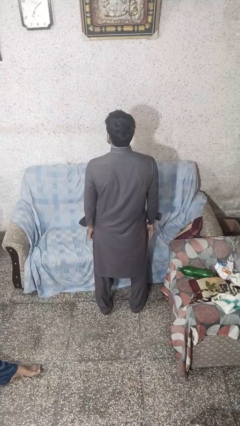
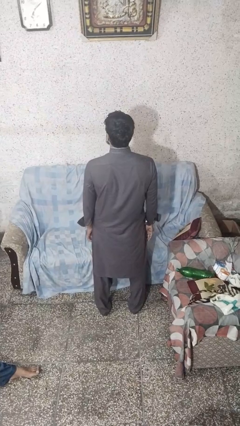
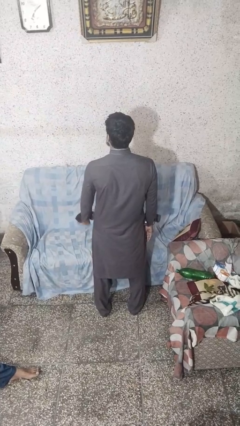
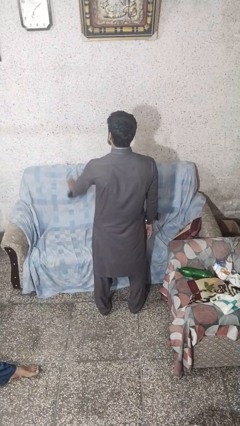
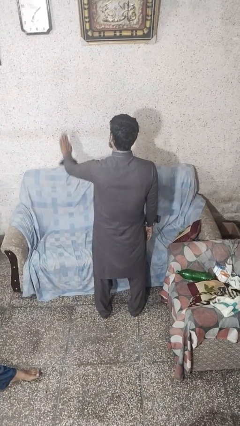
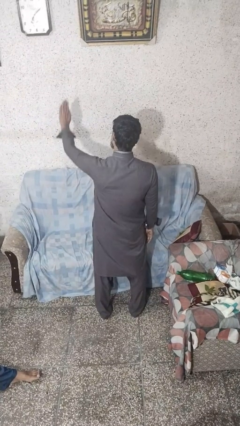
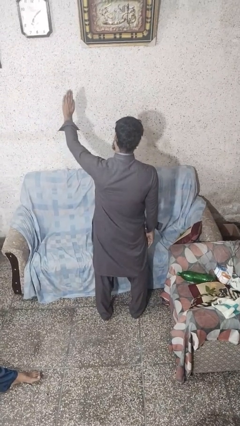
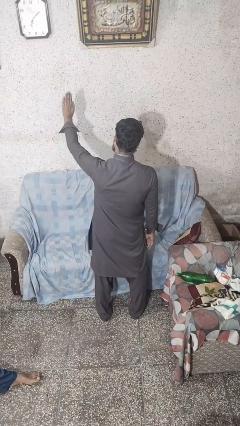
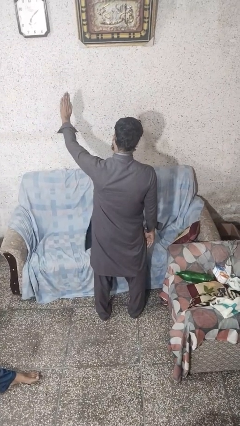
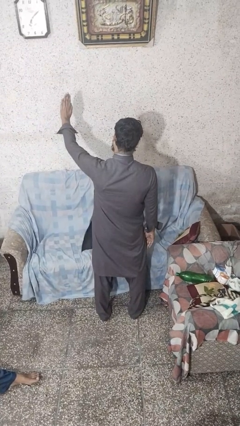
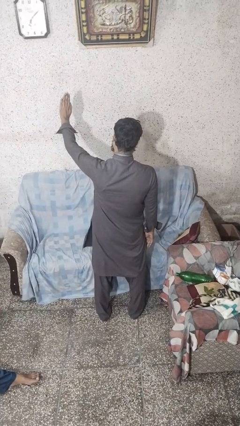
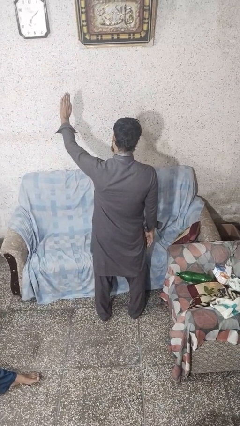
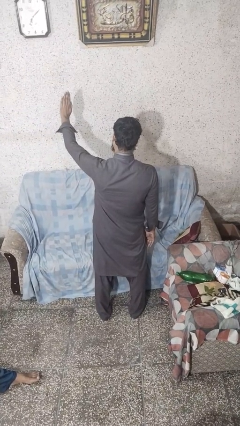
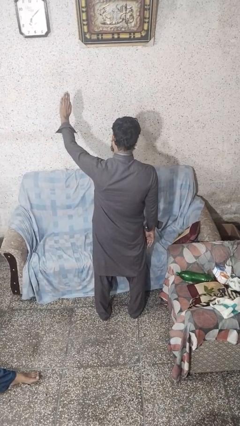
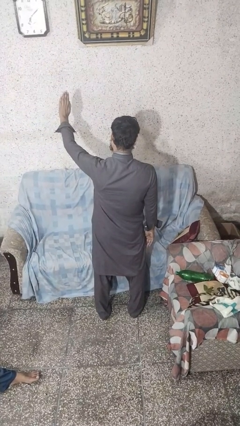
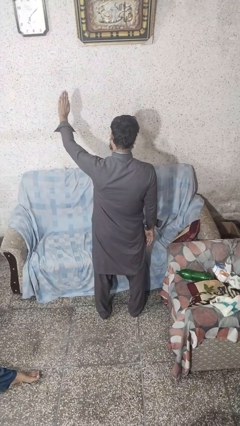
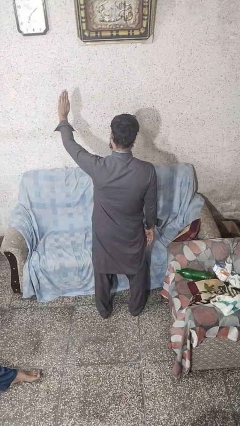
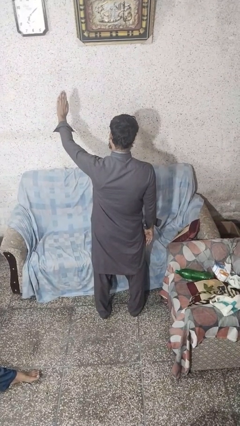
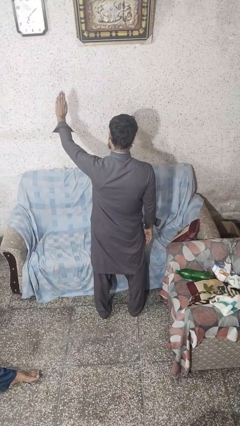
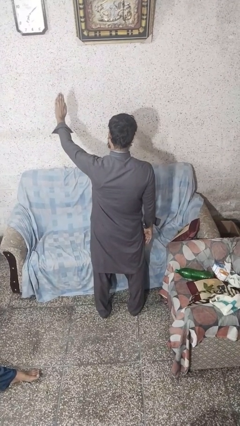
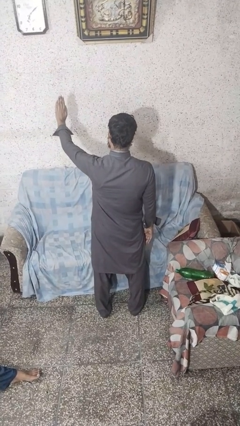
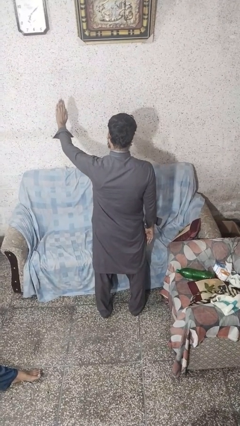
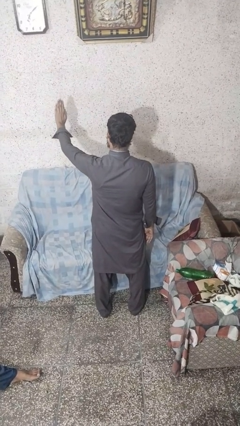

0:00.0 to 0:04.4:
person gestures stop

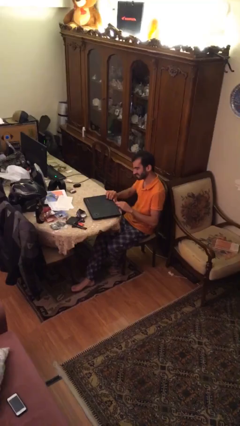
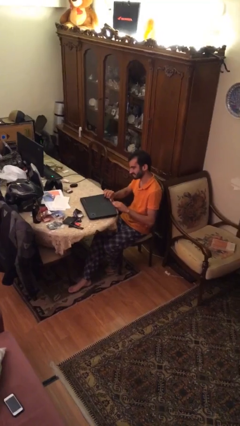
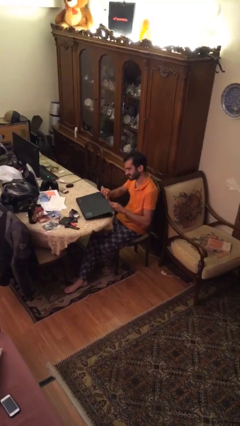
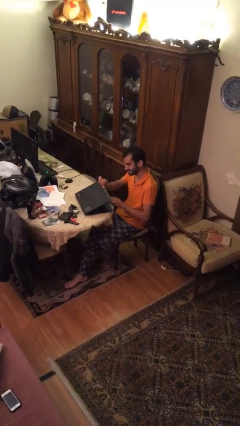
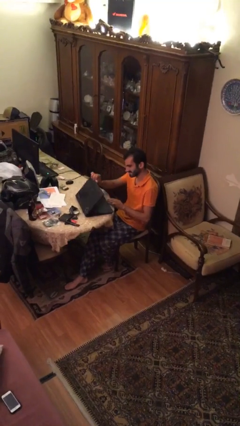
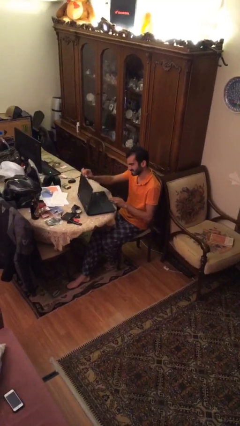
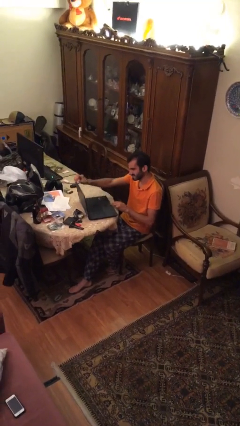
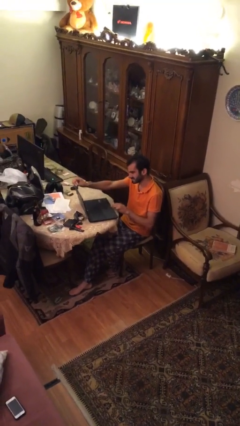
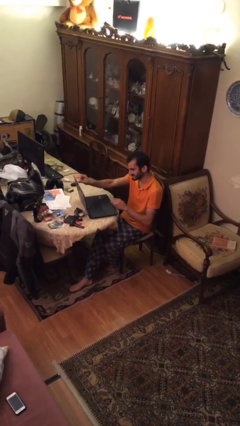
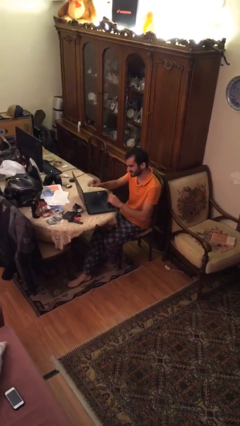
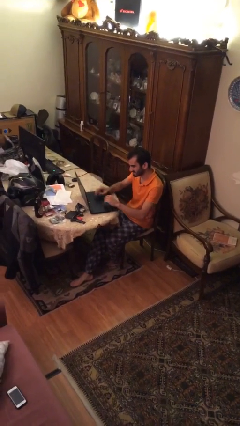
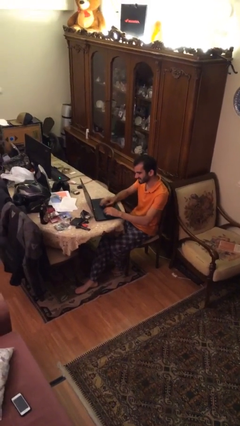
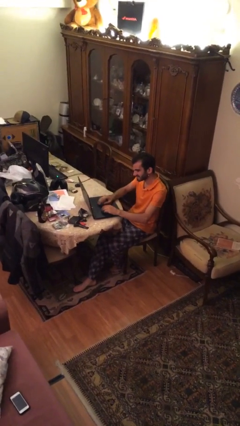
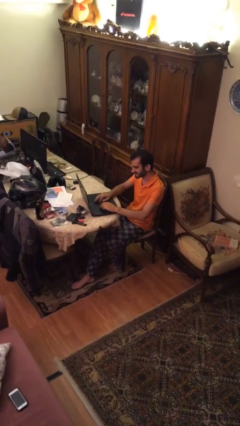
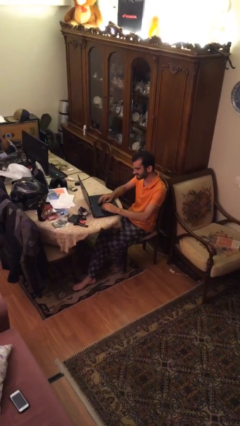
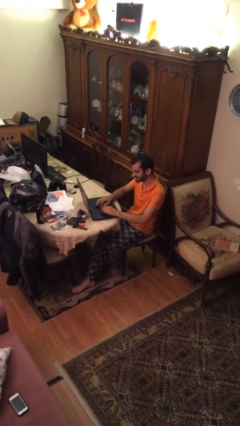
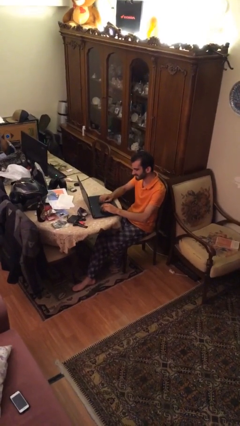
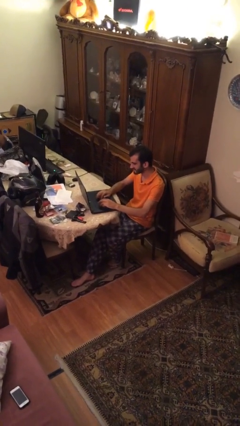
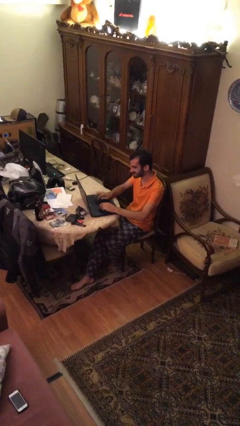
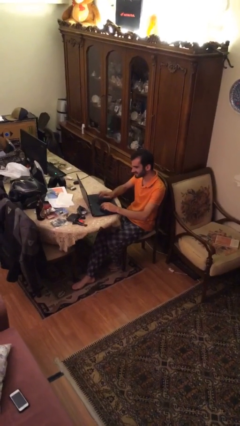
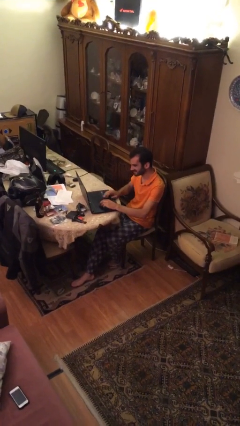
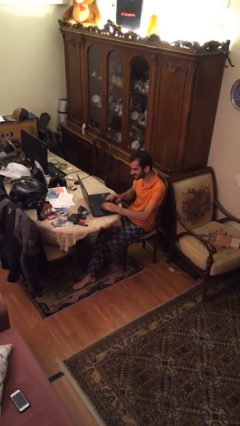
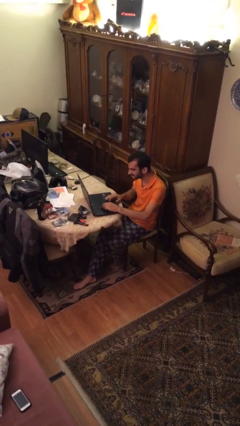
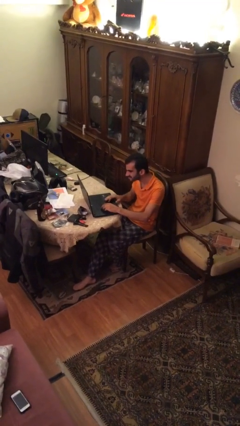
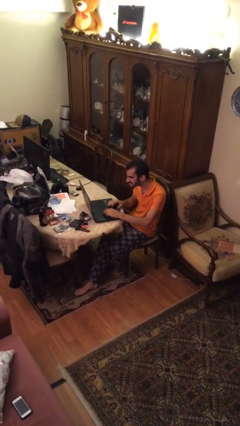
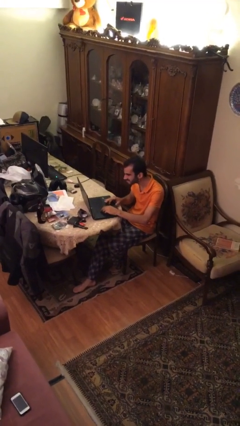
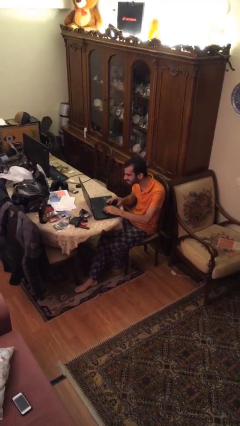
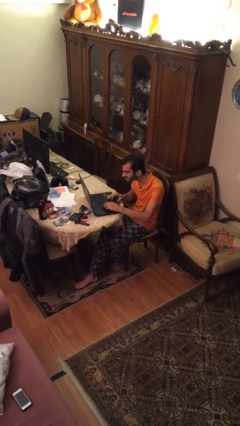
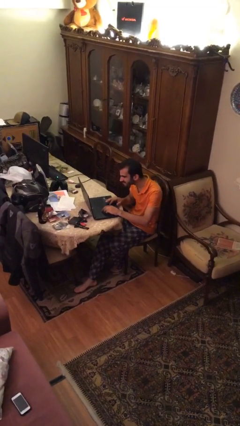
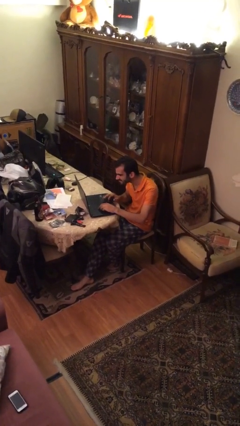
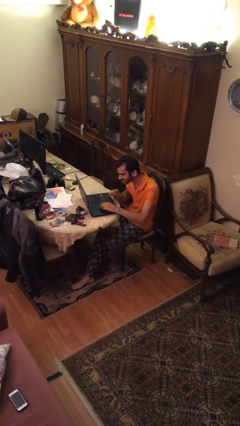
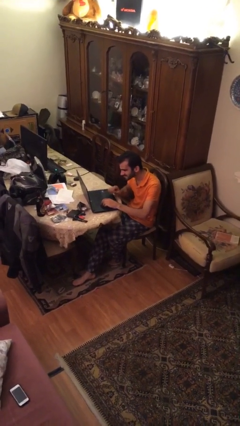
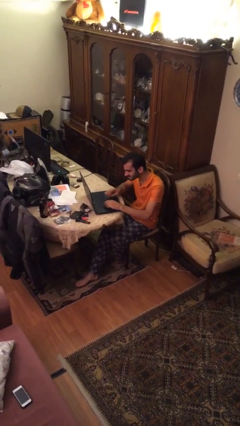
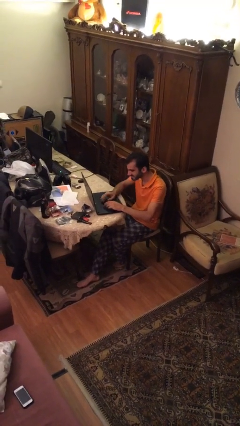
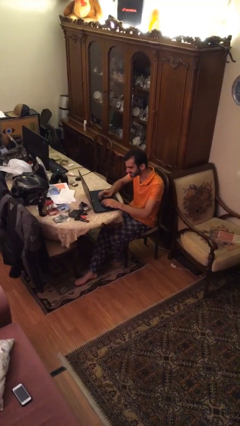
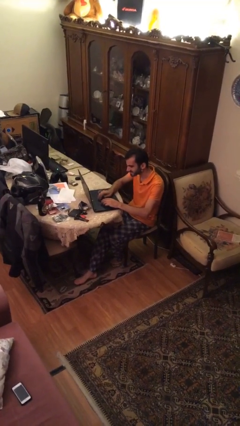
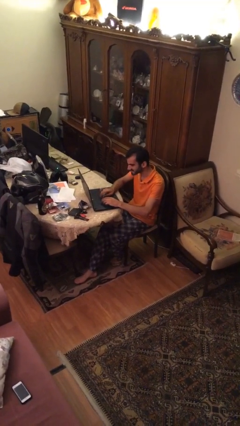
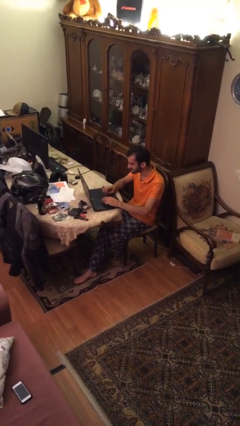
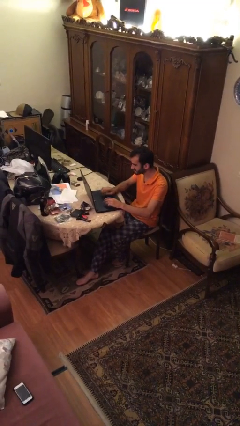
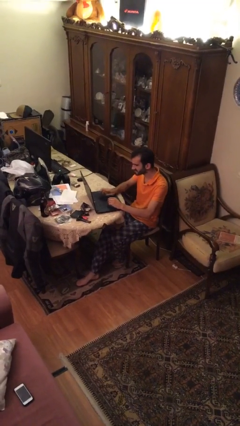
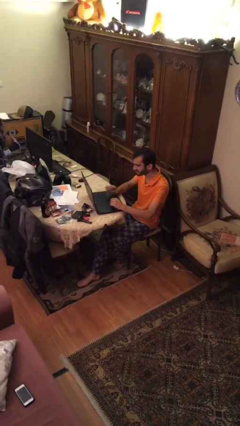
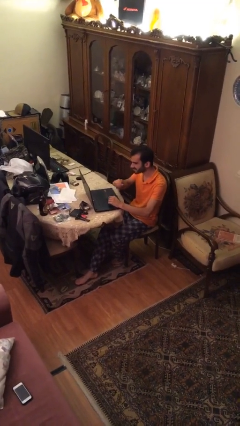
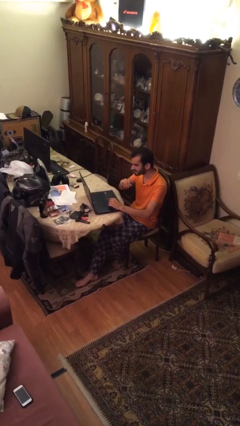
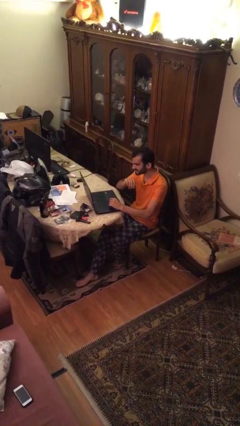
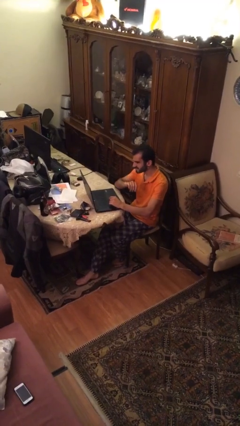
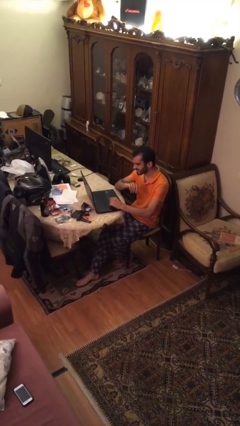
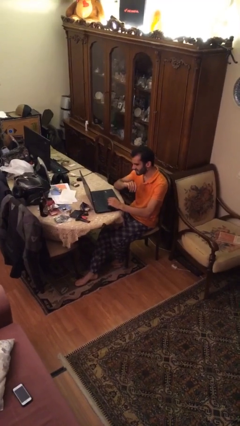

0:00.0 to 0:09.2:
person interacts with laptop

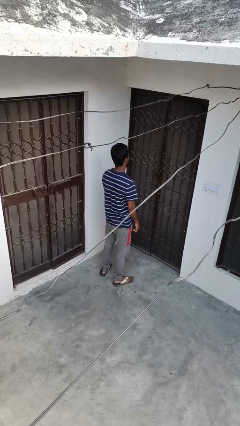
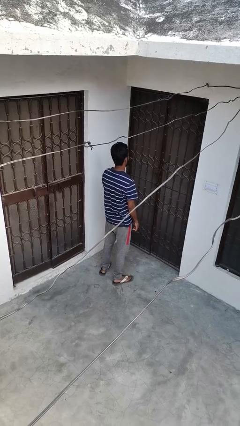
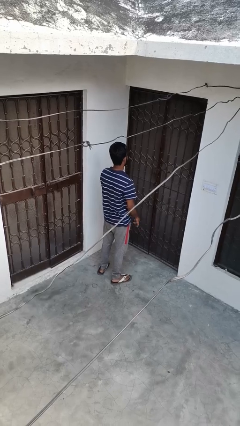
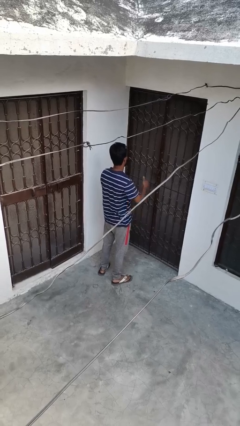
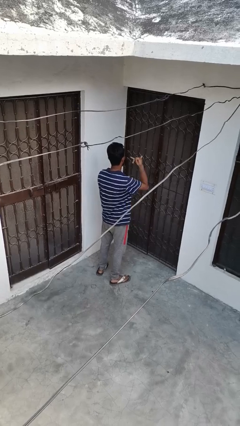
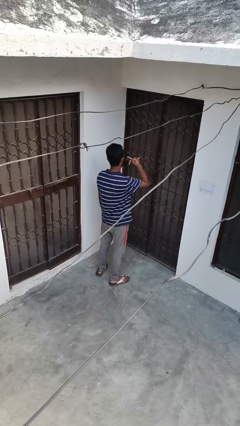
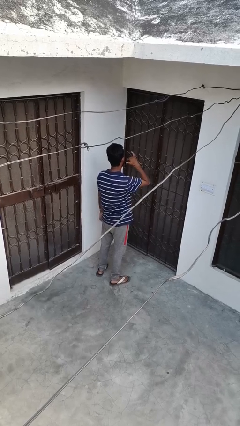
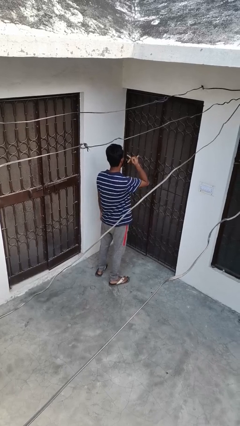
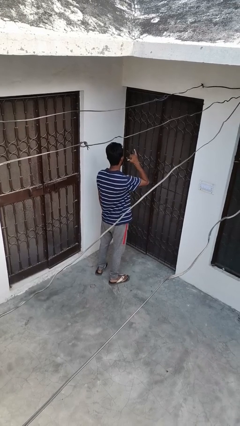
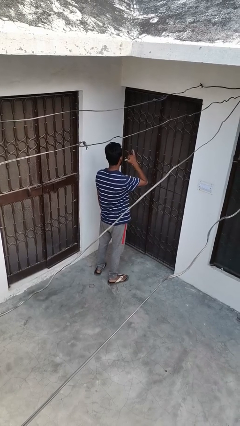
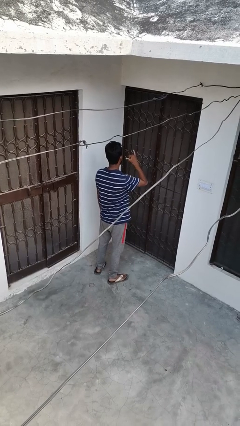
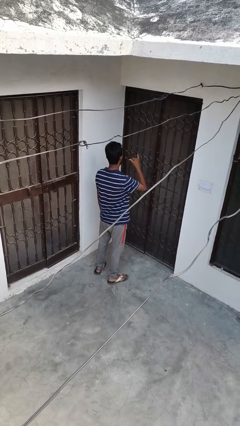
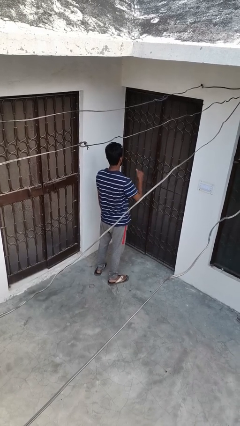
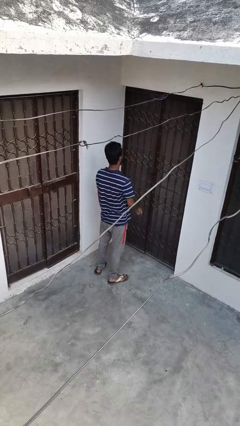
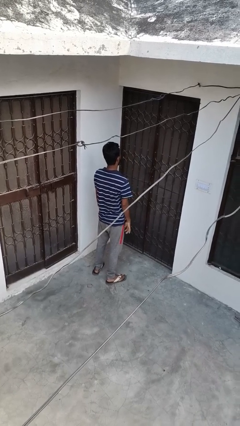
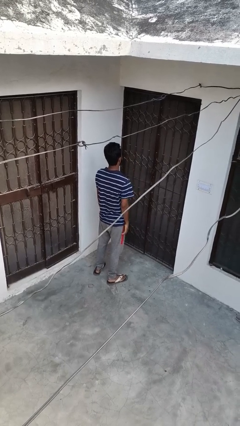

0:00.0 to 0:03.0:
person gestures hang loose

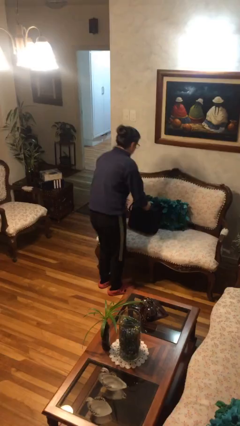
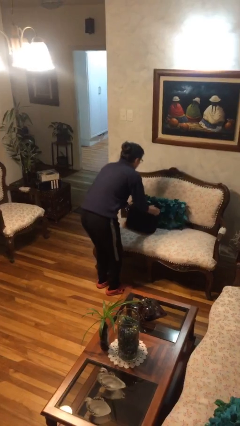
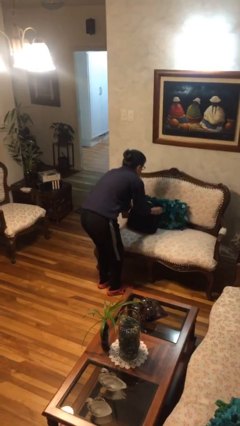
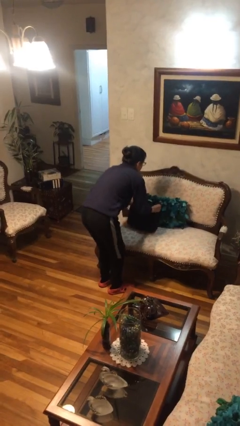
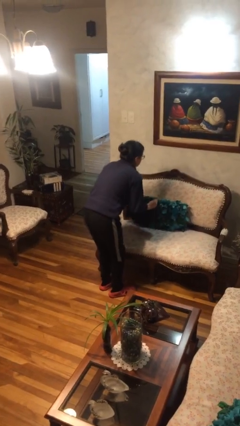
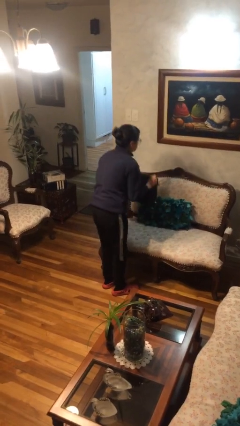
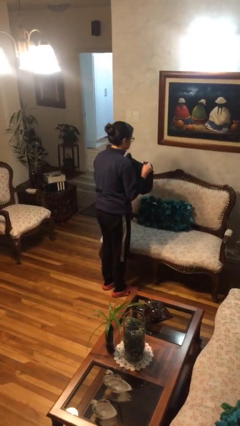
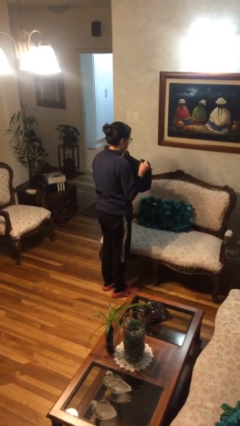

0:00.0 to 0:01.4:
person picks up object from couch
